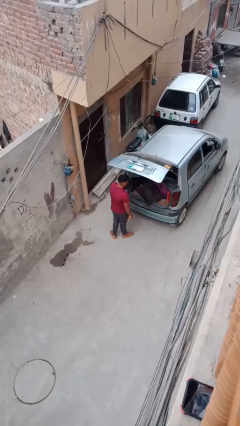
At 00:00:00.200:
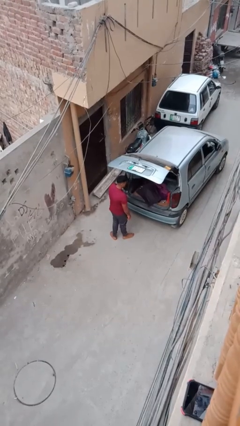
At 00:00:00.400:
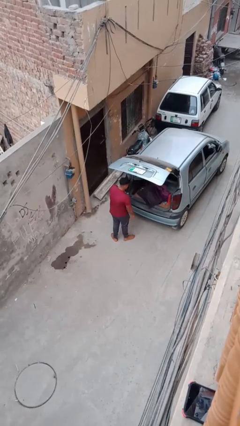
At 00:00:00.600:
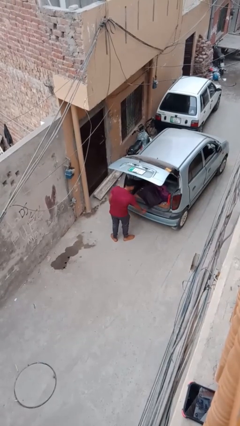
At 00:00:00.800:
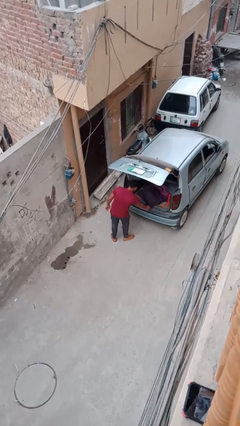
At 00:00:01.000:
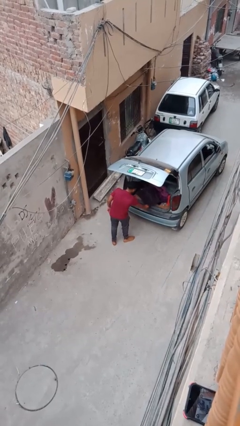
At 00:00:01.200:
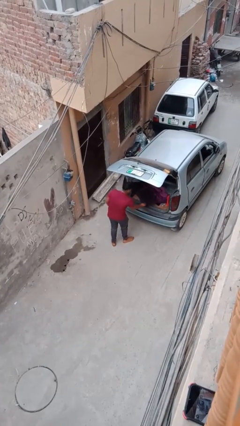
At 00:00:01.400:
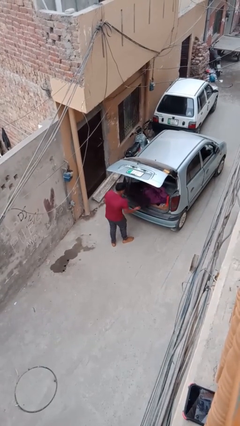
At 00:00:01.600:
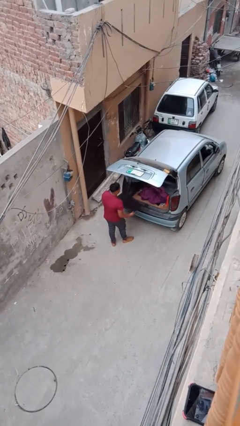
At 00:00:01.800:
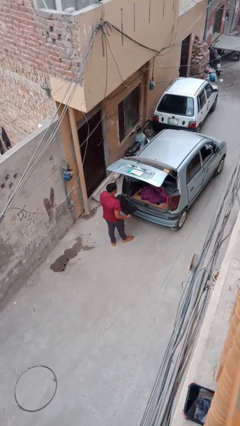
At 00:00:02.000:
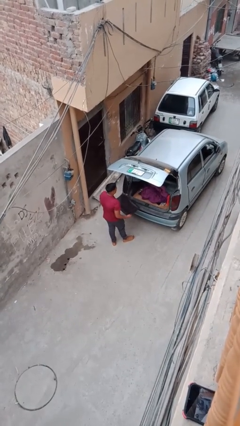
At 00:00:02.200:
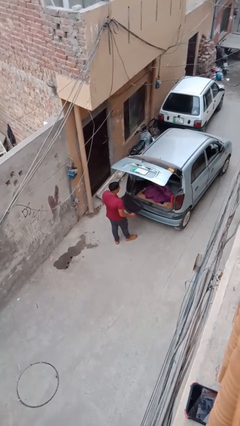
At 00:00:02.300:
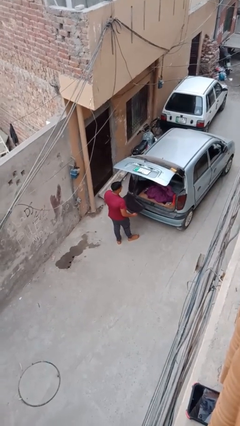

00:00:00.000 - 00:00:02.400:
person unloads car

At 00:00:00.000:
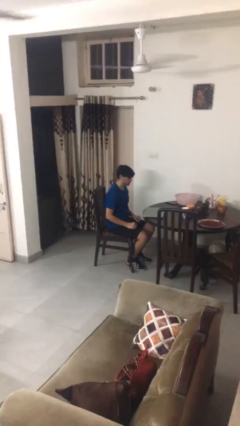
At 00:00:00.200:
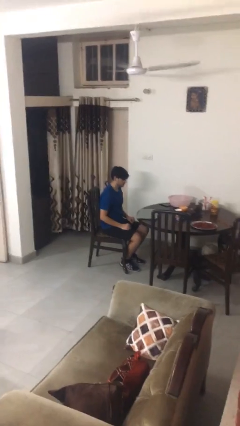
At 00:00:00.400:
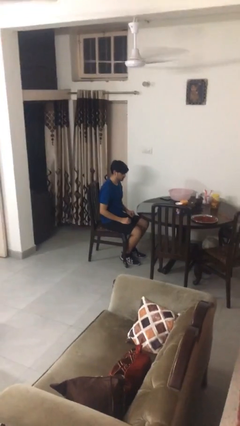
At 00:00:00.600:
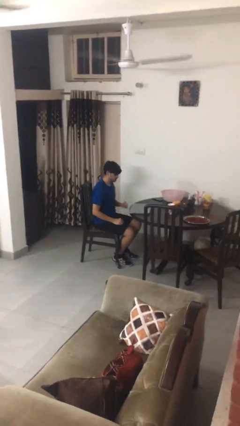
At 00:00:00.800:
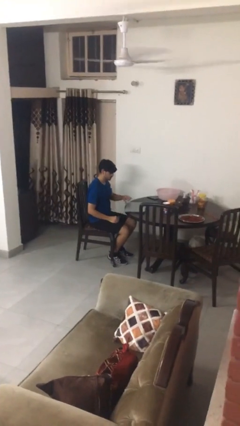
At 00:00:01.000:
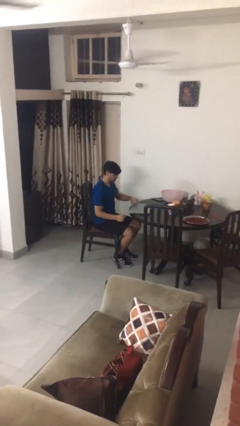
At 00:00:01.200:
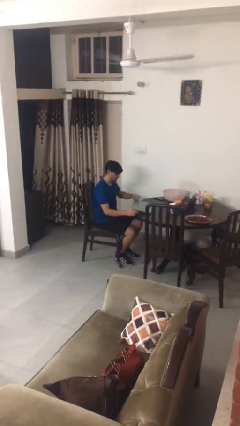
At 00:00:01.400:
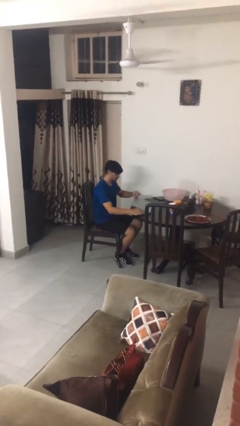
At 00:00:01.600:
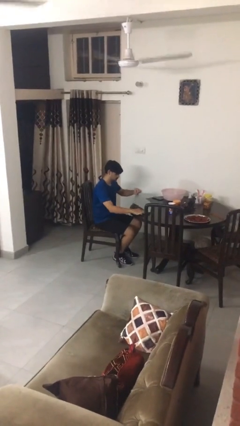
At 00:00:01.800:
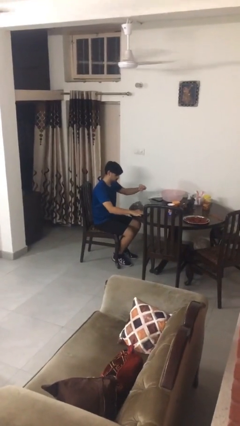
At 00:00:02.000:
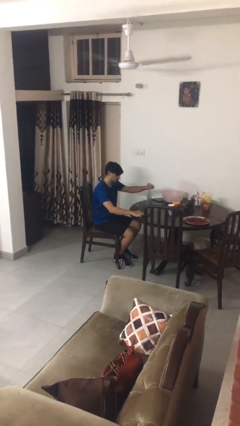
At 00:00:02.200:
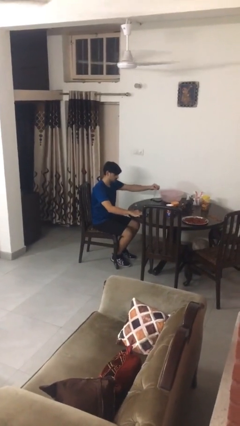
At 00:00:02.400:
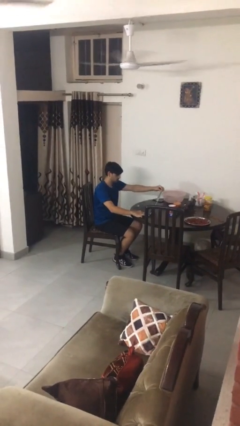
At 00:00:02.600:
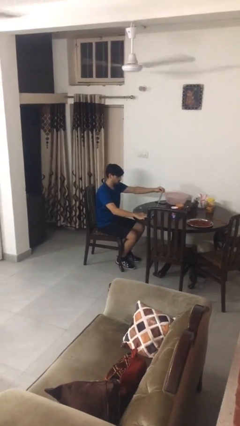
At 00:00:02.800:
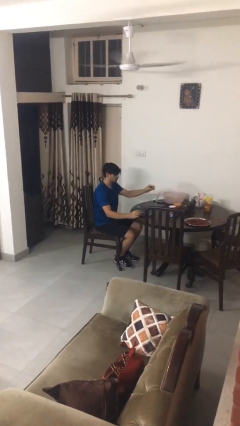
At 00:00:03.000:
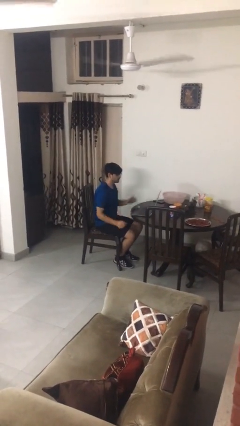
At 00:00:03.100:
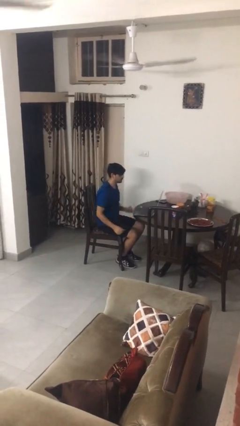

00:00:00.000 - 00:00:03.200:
person opens laptop

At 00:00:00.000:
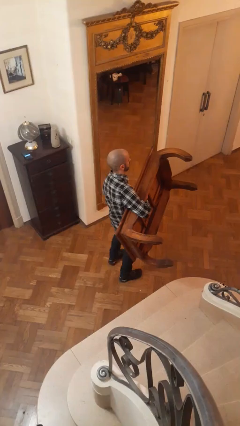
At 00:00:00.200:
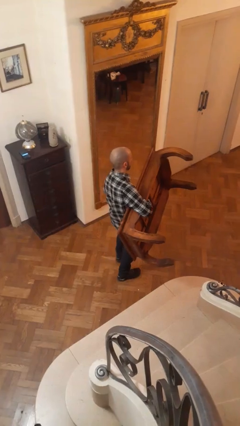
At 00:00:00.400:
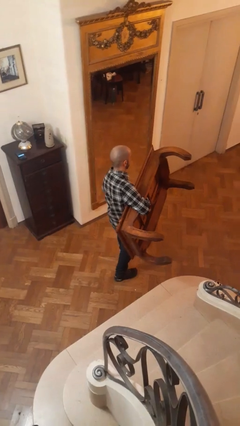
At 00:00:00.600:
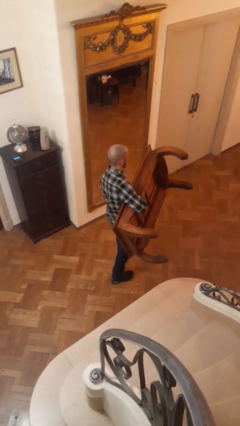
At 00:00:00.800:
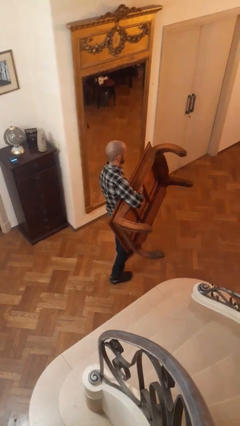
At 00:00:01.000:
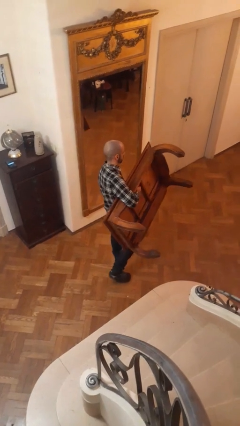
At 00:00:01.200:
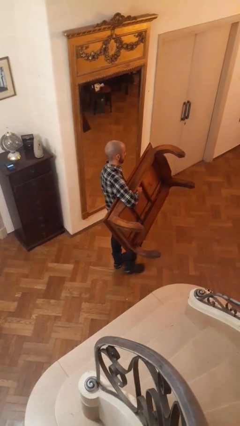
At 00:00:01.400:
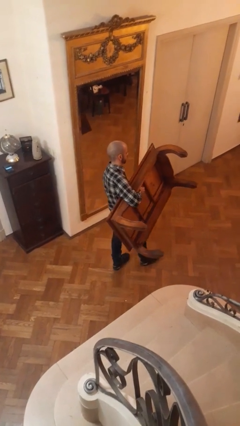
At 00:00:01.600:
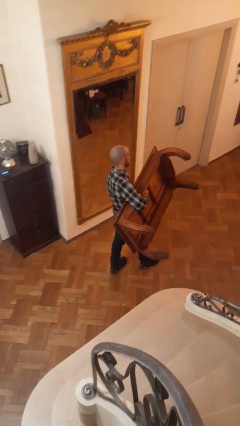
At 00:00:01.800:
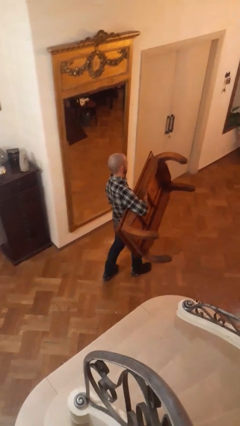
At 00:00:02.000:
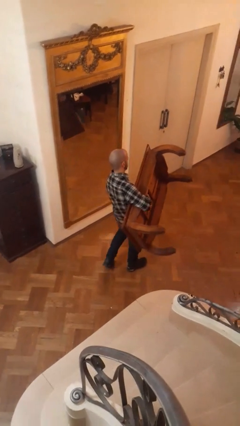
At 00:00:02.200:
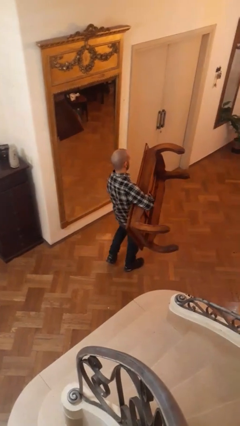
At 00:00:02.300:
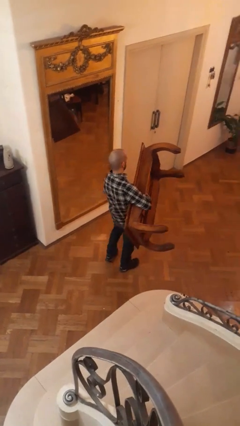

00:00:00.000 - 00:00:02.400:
person carries furniture

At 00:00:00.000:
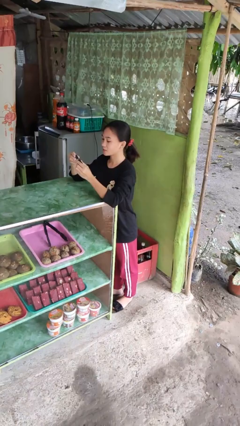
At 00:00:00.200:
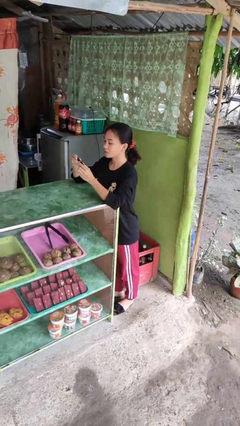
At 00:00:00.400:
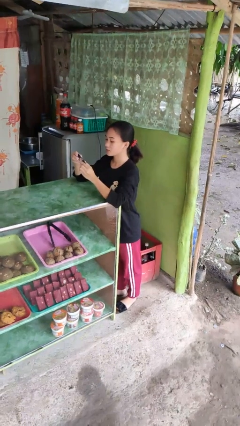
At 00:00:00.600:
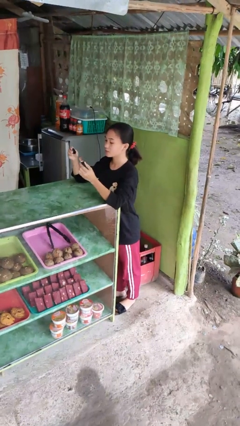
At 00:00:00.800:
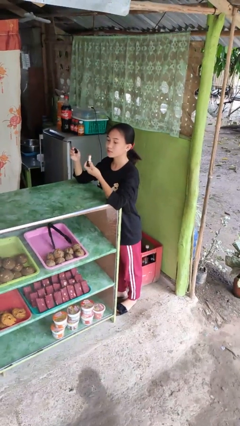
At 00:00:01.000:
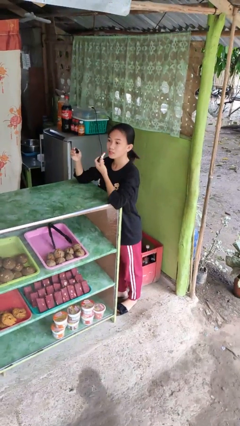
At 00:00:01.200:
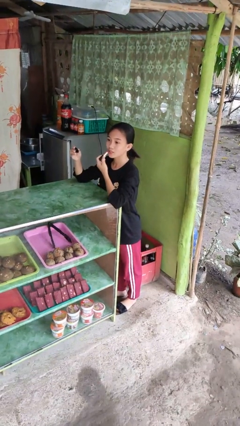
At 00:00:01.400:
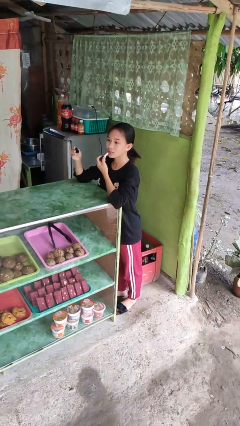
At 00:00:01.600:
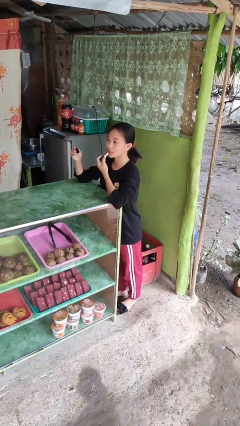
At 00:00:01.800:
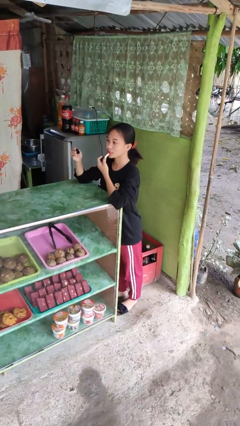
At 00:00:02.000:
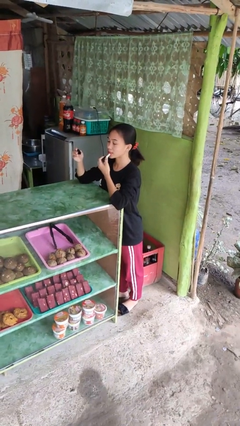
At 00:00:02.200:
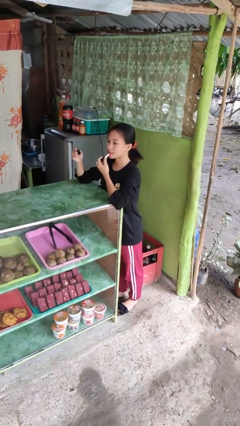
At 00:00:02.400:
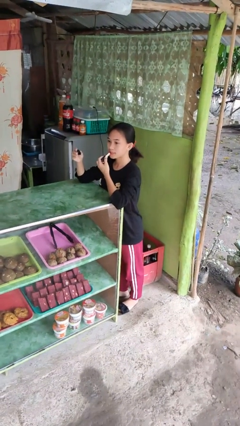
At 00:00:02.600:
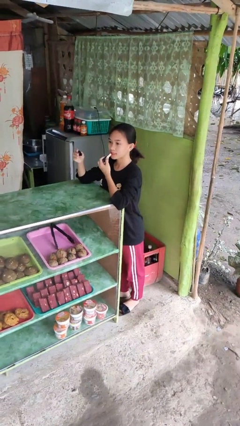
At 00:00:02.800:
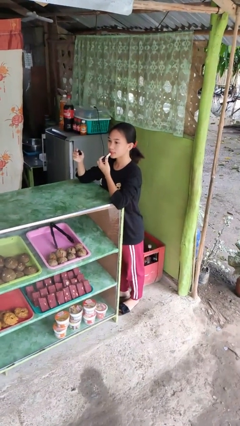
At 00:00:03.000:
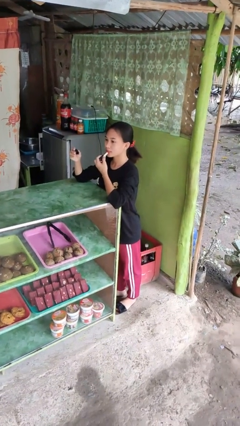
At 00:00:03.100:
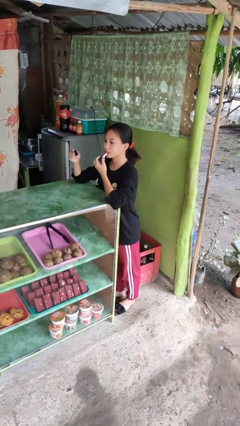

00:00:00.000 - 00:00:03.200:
person applies lip makeup

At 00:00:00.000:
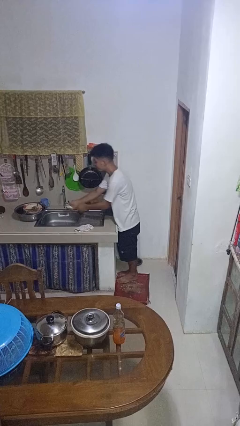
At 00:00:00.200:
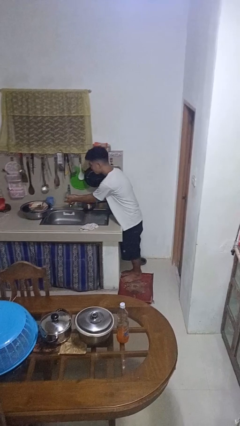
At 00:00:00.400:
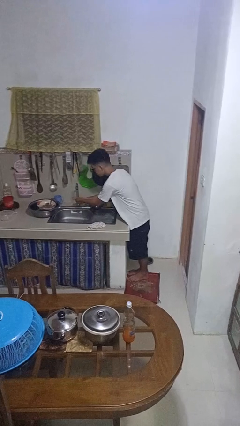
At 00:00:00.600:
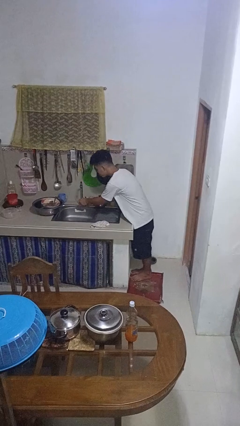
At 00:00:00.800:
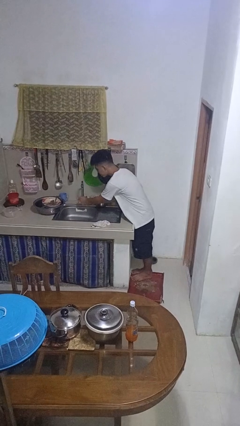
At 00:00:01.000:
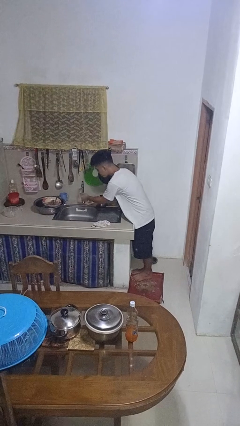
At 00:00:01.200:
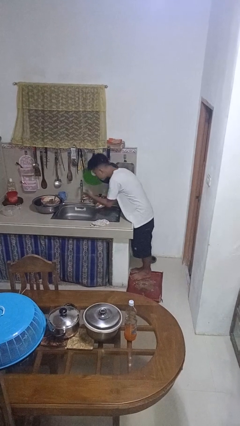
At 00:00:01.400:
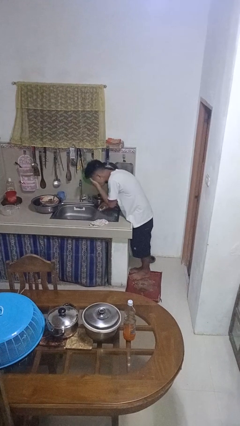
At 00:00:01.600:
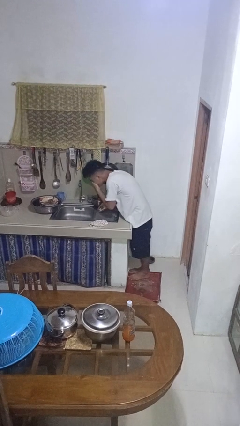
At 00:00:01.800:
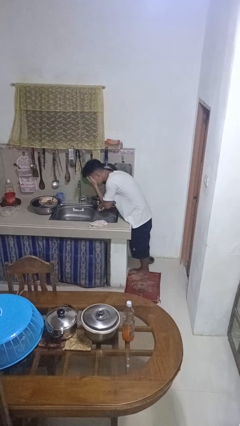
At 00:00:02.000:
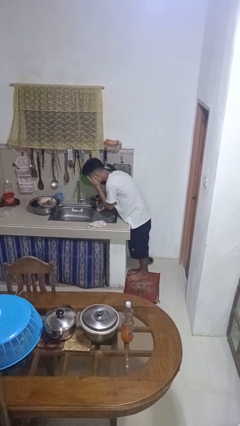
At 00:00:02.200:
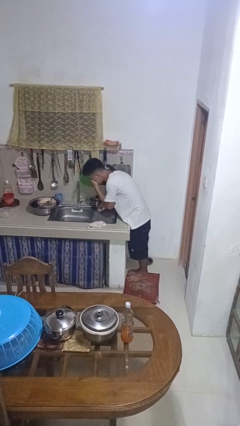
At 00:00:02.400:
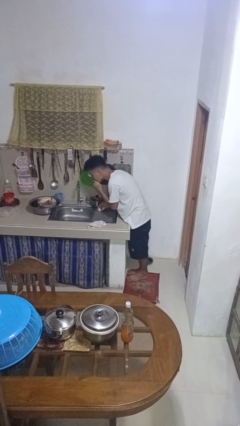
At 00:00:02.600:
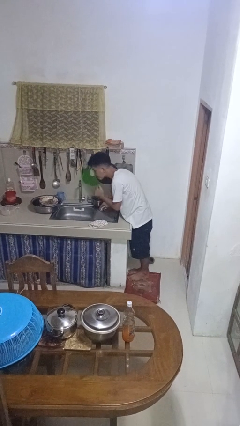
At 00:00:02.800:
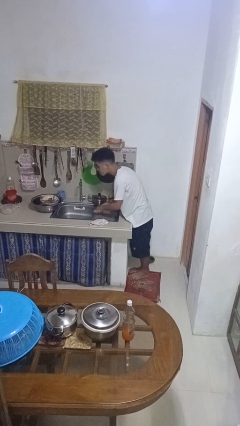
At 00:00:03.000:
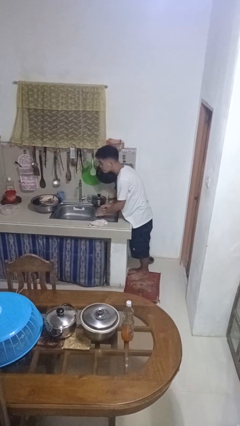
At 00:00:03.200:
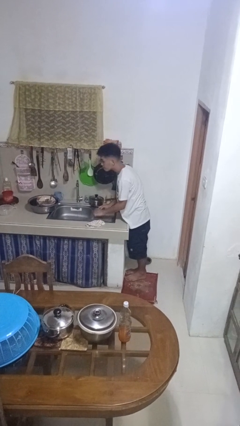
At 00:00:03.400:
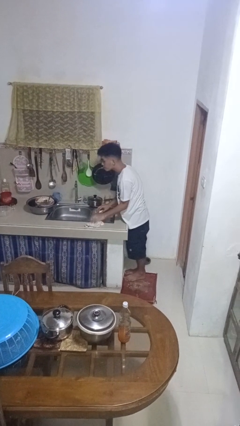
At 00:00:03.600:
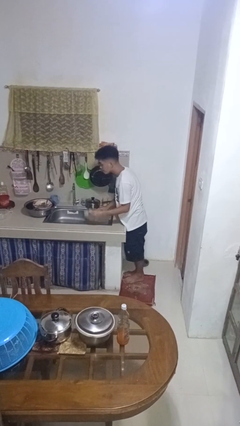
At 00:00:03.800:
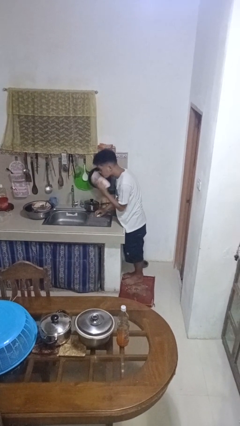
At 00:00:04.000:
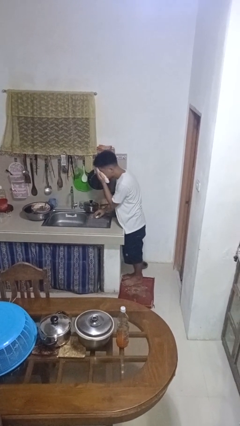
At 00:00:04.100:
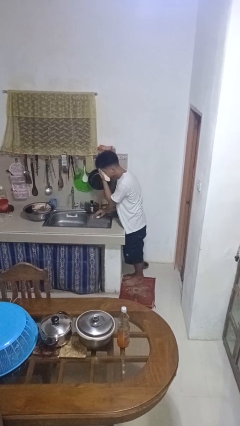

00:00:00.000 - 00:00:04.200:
person washes face

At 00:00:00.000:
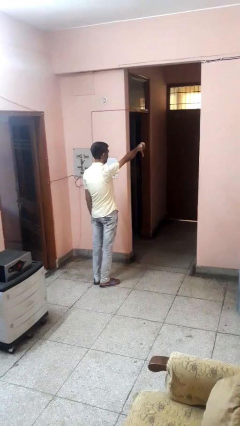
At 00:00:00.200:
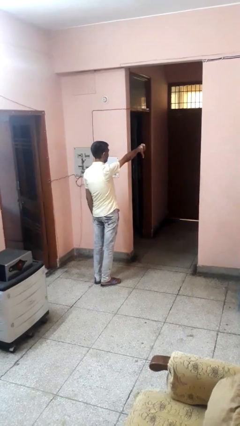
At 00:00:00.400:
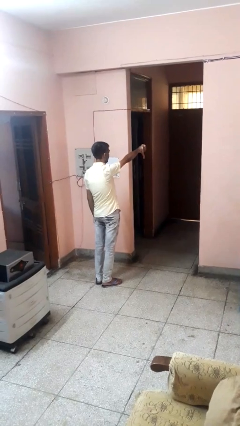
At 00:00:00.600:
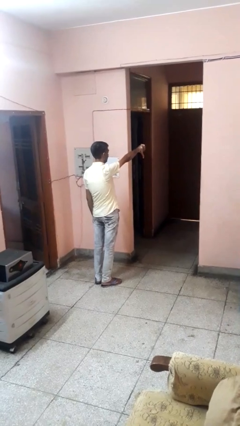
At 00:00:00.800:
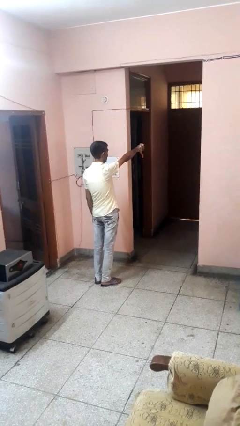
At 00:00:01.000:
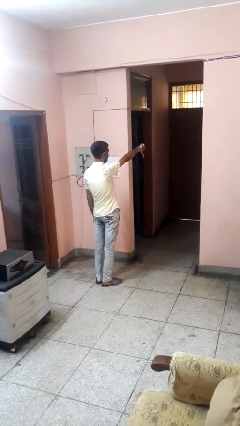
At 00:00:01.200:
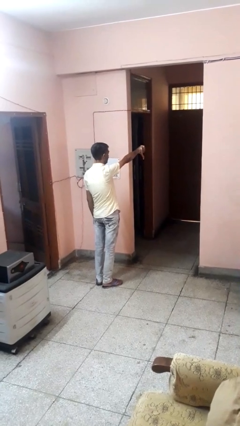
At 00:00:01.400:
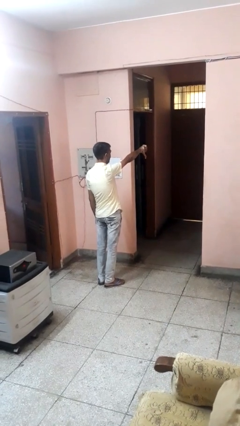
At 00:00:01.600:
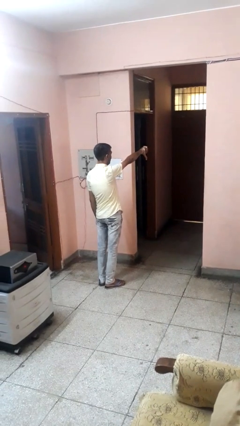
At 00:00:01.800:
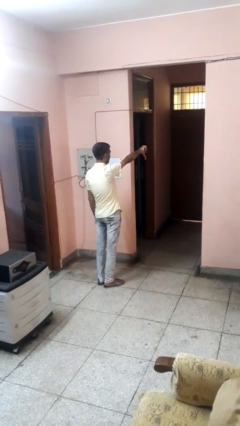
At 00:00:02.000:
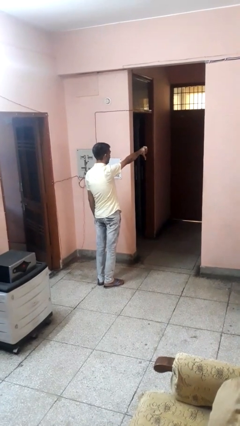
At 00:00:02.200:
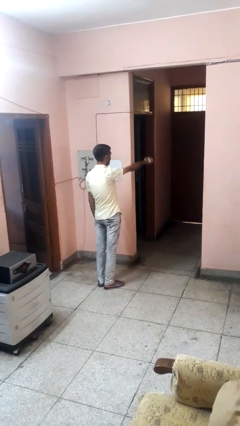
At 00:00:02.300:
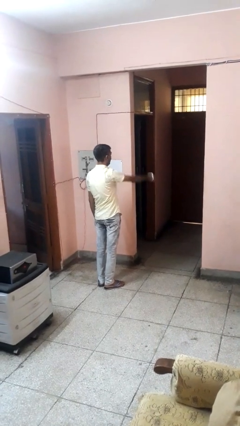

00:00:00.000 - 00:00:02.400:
person gestures thumbs down
